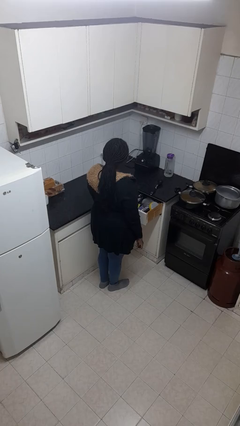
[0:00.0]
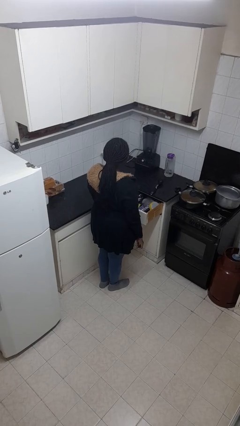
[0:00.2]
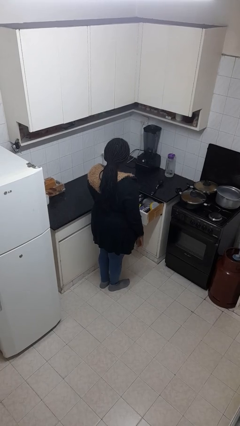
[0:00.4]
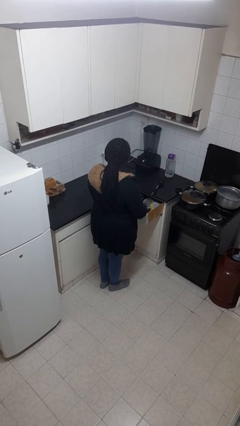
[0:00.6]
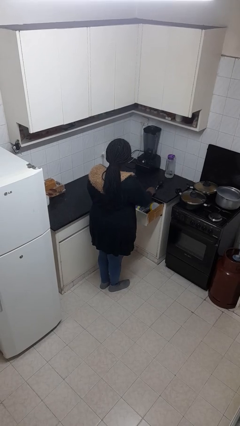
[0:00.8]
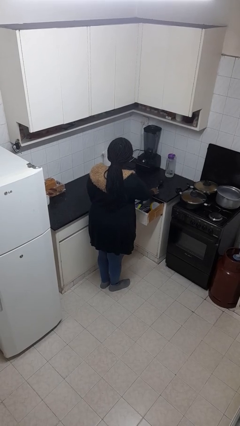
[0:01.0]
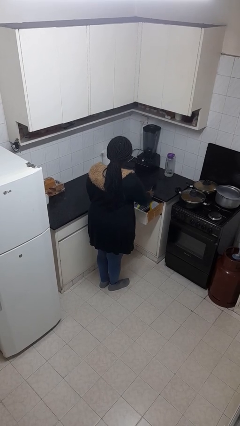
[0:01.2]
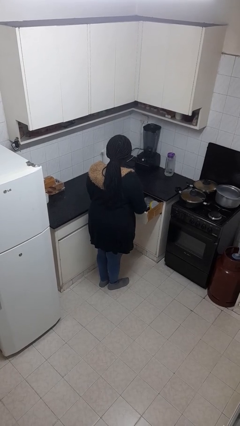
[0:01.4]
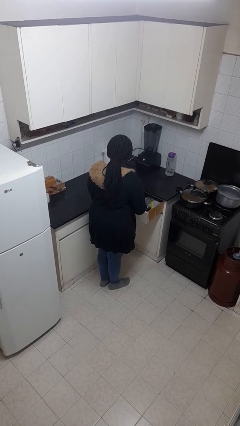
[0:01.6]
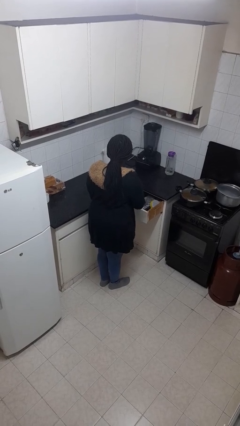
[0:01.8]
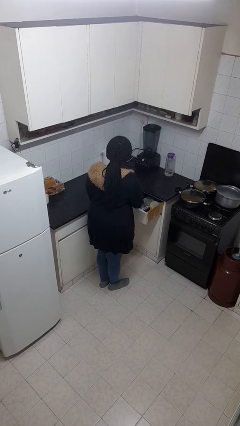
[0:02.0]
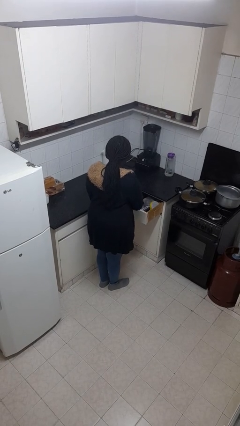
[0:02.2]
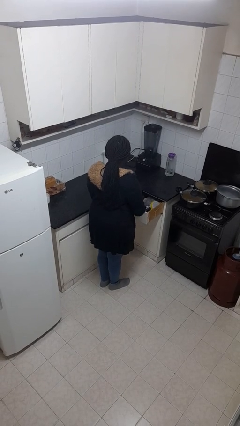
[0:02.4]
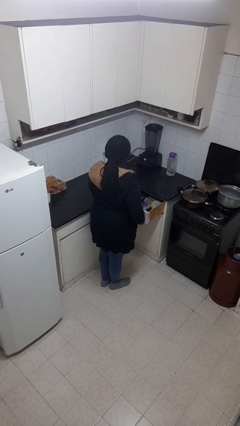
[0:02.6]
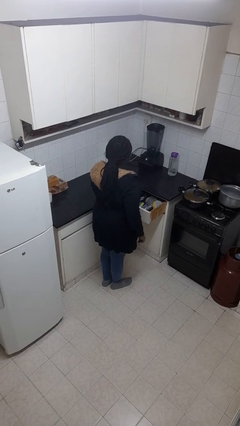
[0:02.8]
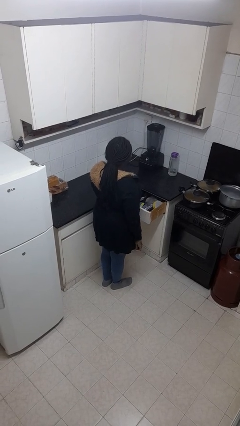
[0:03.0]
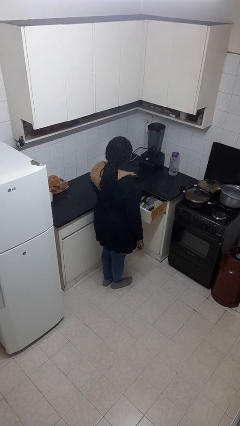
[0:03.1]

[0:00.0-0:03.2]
person puts object into kitchen drawer

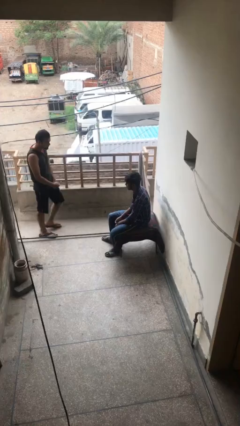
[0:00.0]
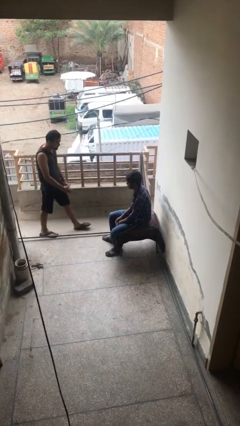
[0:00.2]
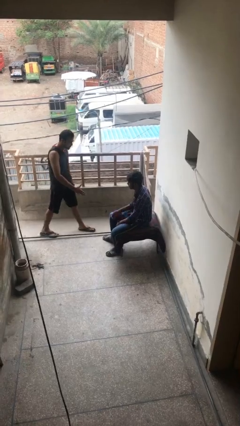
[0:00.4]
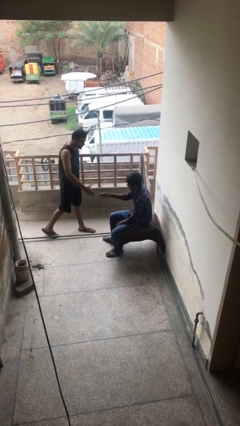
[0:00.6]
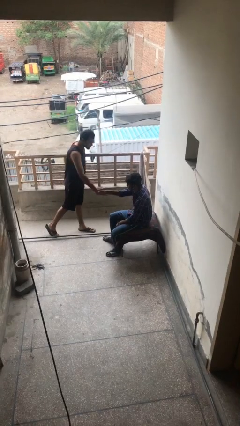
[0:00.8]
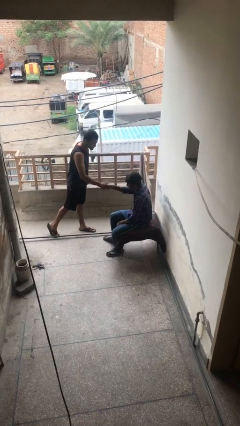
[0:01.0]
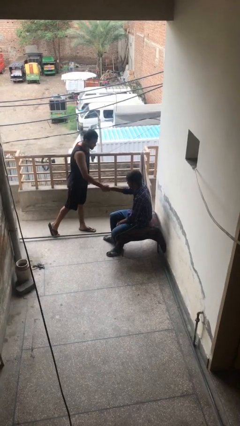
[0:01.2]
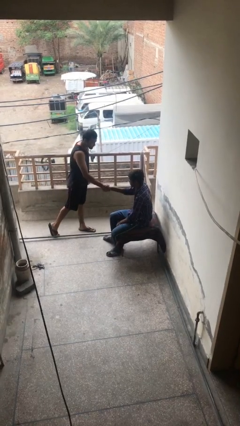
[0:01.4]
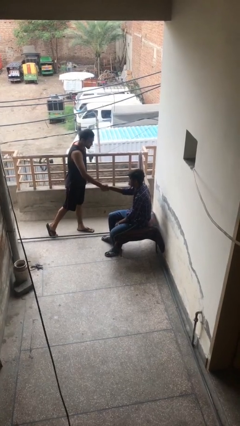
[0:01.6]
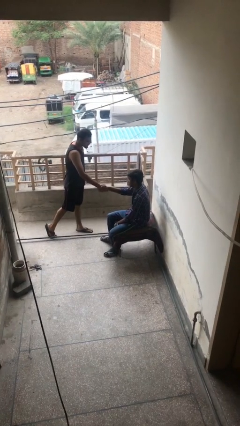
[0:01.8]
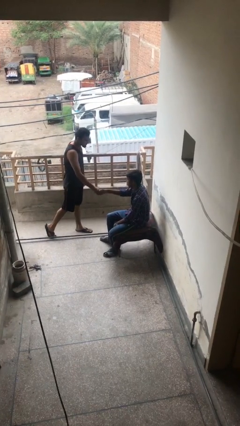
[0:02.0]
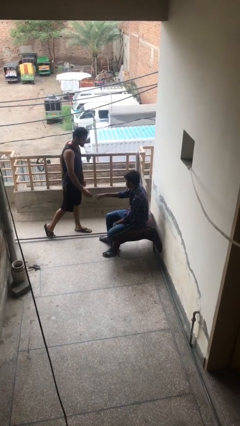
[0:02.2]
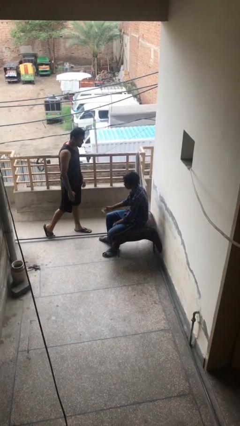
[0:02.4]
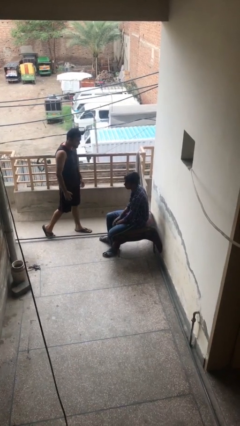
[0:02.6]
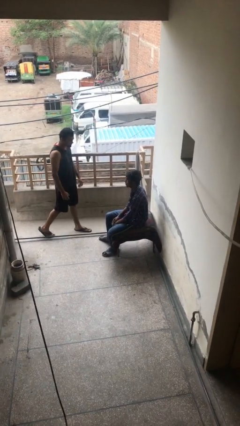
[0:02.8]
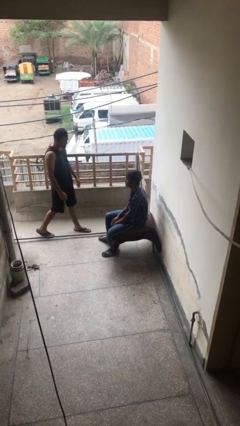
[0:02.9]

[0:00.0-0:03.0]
person shakes hand

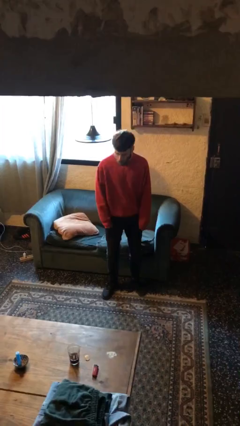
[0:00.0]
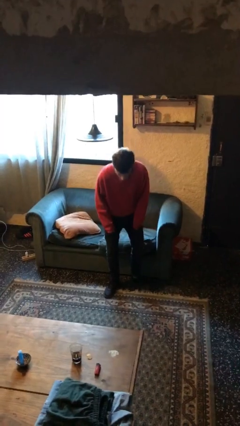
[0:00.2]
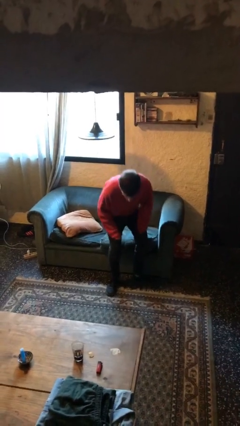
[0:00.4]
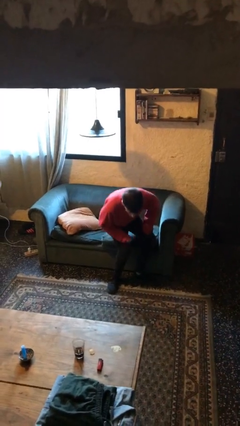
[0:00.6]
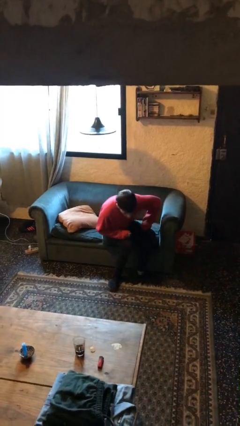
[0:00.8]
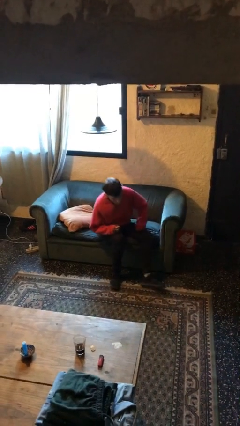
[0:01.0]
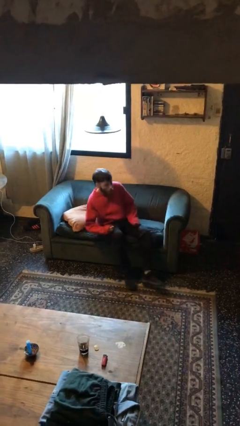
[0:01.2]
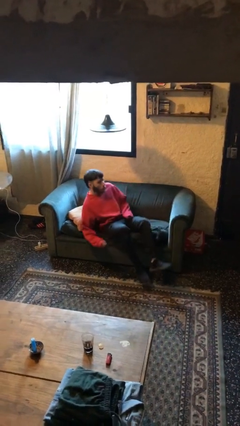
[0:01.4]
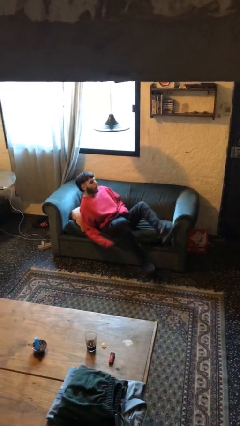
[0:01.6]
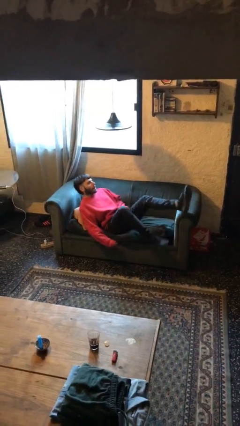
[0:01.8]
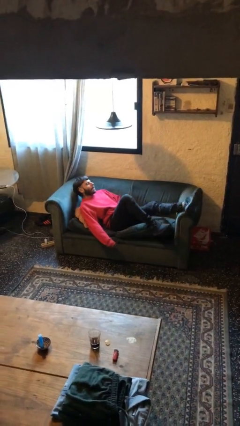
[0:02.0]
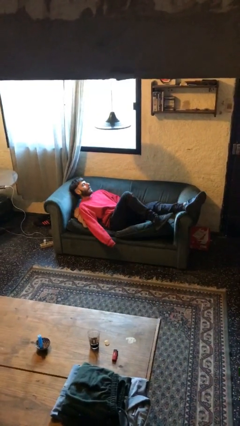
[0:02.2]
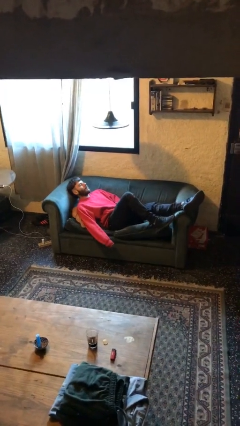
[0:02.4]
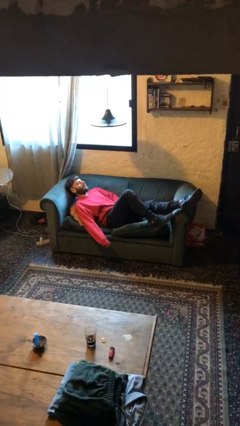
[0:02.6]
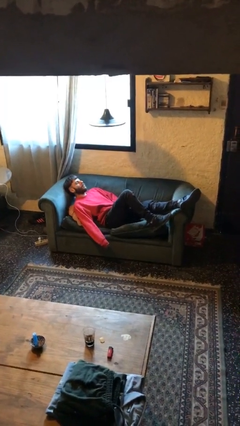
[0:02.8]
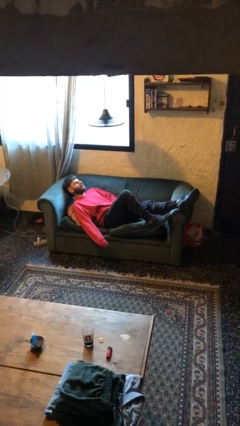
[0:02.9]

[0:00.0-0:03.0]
person lies down on couch

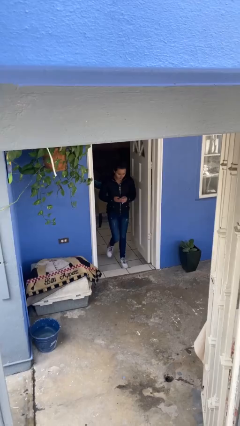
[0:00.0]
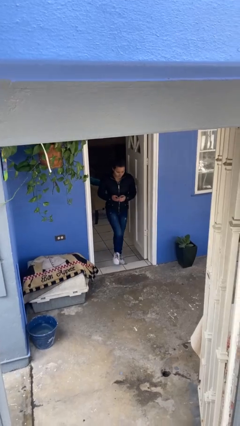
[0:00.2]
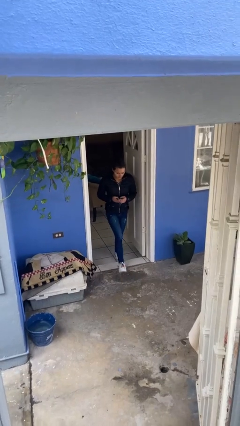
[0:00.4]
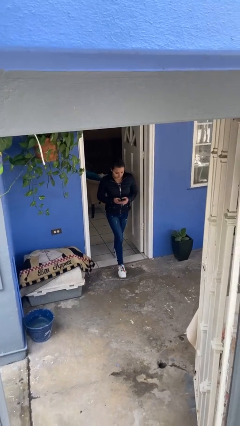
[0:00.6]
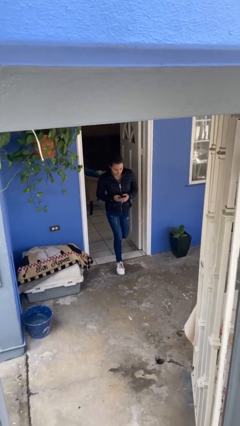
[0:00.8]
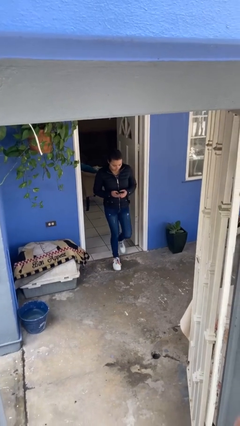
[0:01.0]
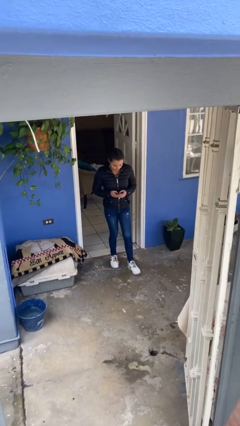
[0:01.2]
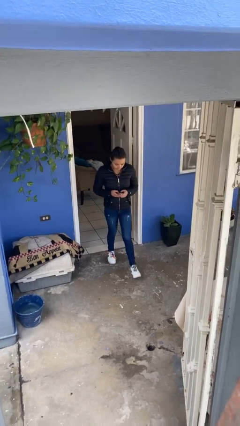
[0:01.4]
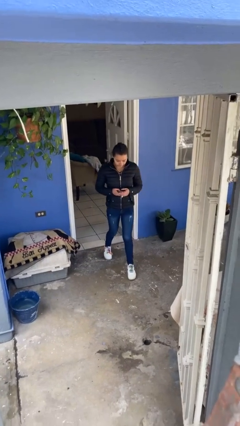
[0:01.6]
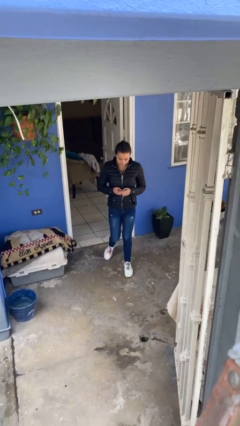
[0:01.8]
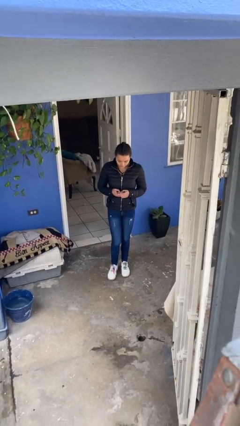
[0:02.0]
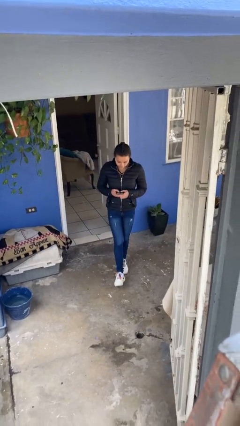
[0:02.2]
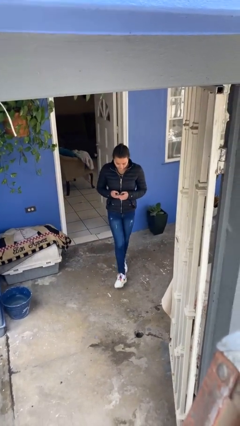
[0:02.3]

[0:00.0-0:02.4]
person enters scene through structure

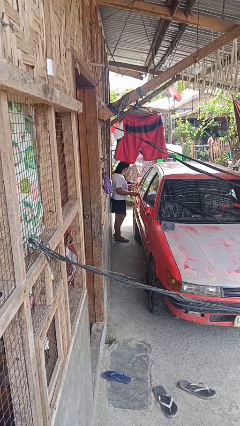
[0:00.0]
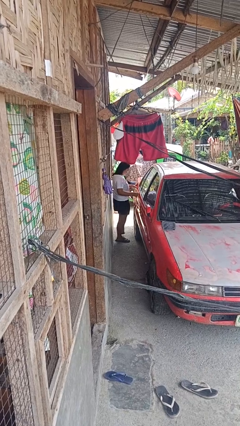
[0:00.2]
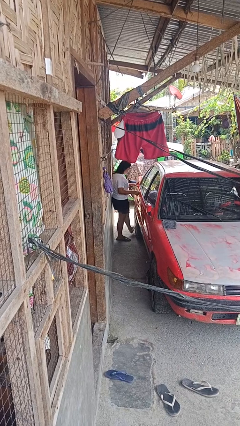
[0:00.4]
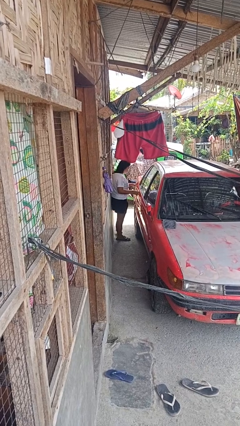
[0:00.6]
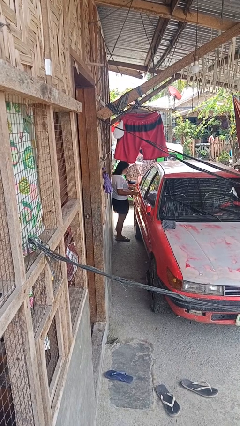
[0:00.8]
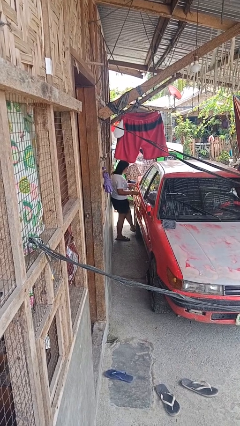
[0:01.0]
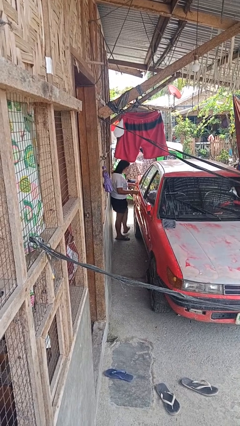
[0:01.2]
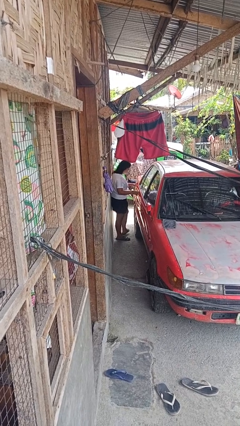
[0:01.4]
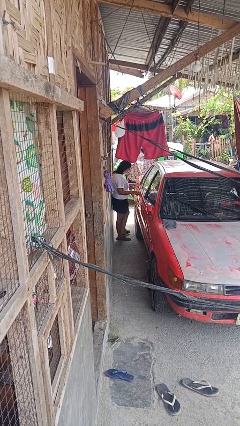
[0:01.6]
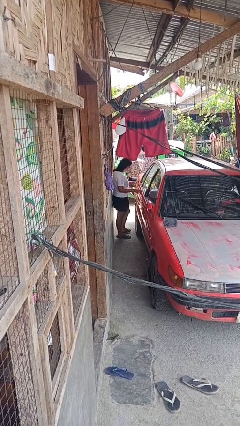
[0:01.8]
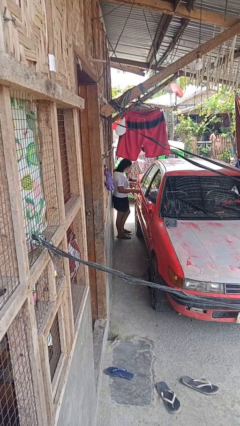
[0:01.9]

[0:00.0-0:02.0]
person kicks car tires

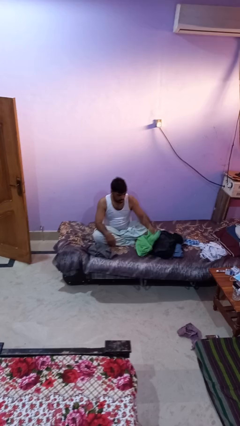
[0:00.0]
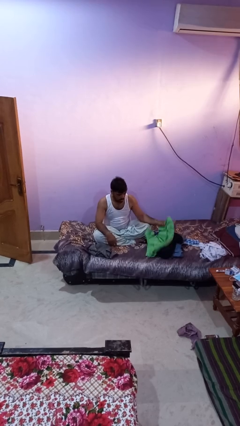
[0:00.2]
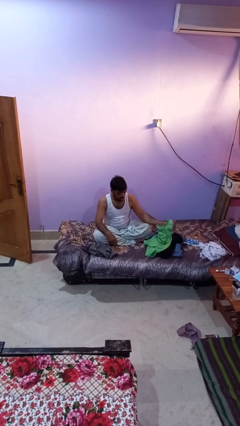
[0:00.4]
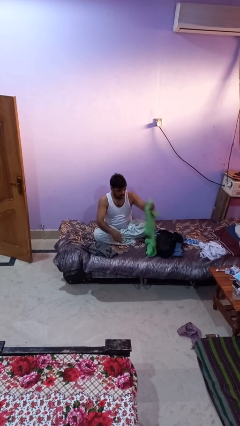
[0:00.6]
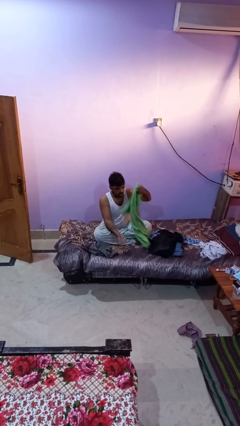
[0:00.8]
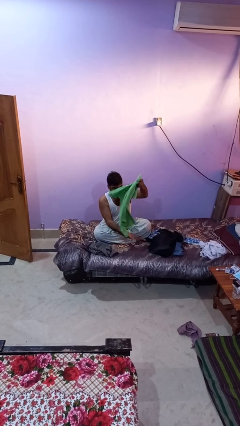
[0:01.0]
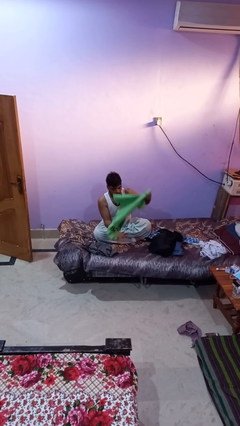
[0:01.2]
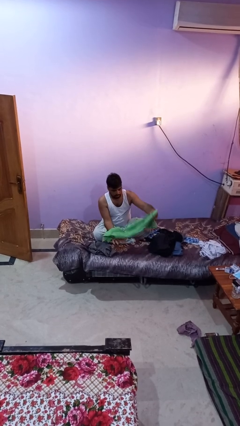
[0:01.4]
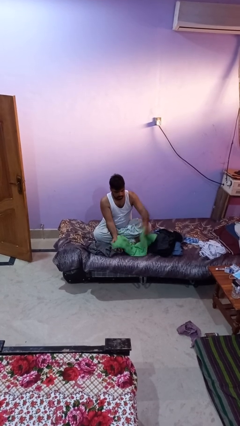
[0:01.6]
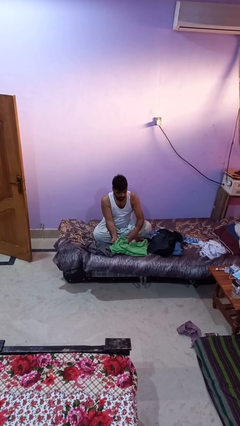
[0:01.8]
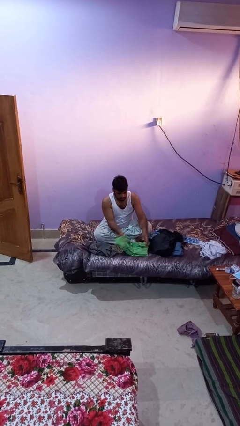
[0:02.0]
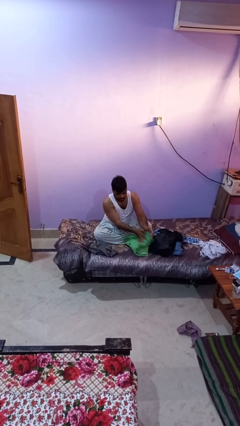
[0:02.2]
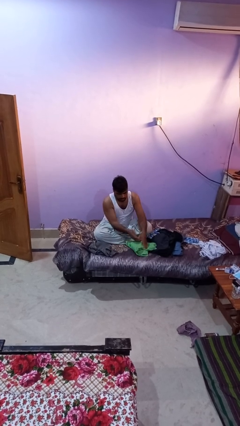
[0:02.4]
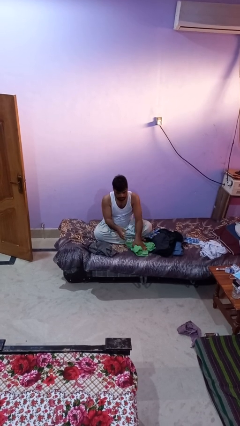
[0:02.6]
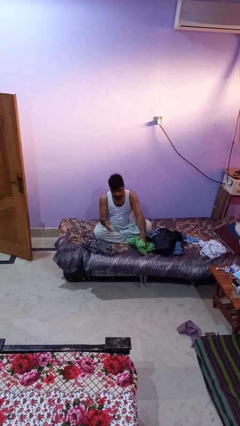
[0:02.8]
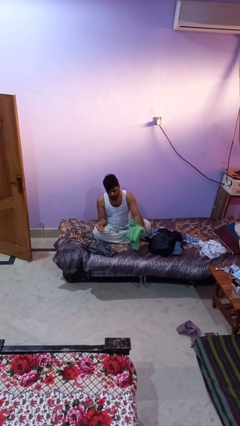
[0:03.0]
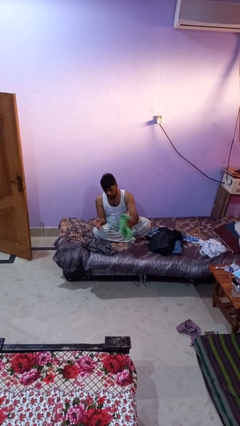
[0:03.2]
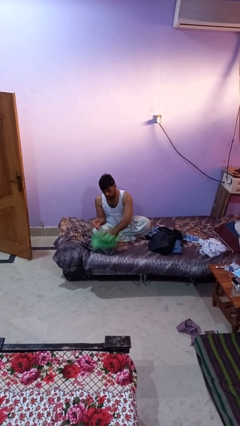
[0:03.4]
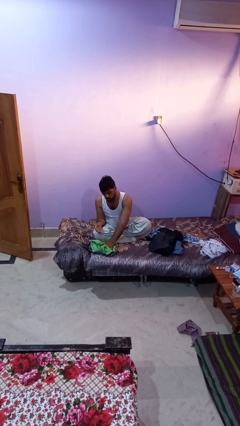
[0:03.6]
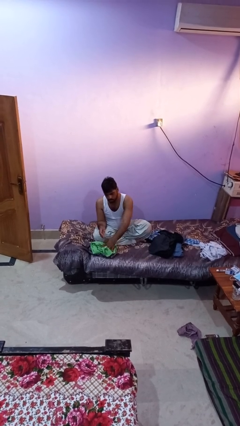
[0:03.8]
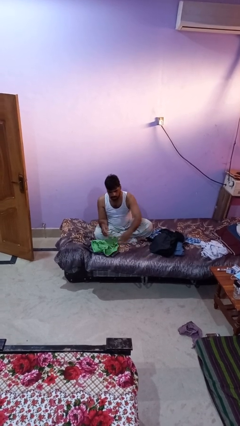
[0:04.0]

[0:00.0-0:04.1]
person folds shirt
